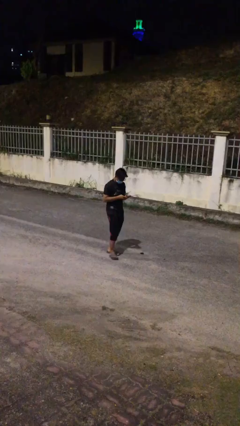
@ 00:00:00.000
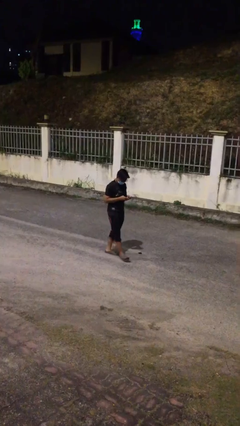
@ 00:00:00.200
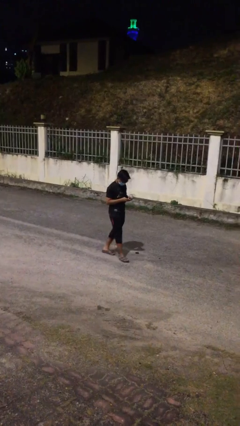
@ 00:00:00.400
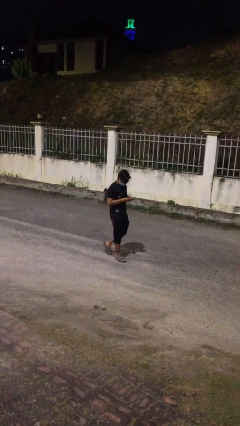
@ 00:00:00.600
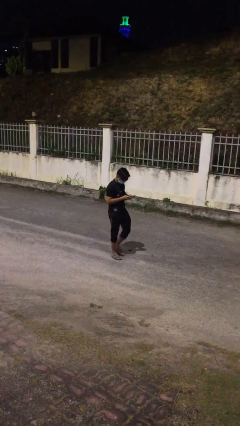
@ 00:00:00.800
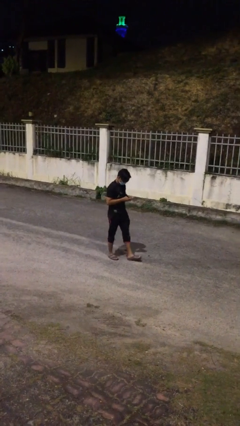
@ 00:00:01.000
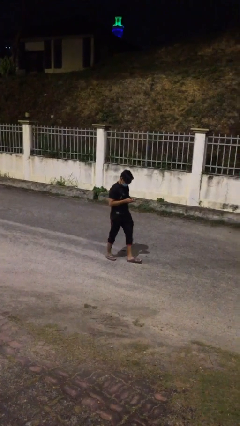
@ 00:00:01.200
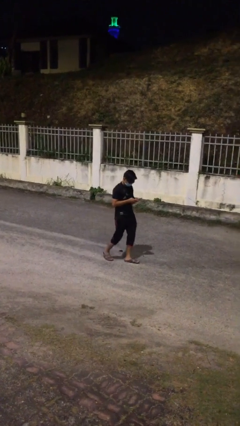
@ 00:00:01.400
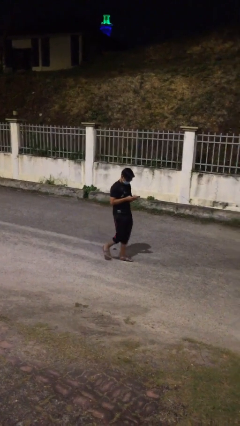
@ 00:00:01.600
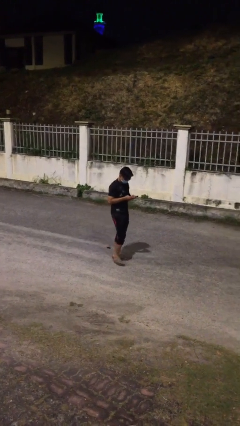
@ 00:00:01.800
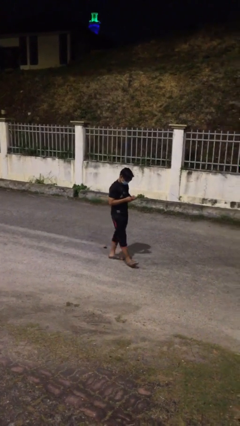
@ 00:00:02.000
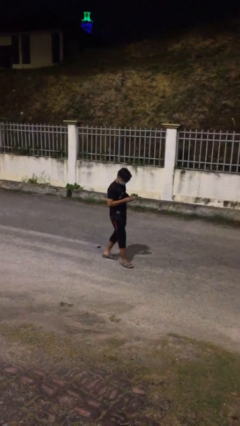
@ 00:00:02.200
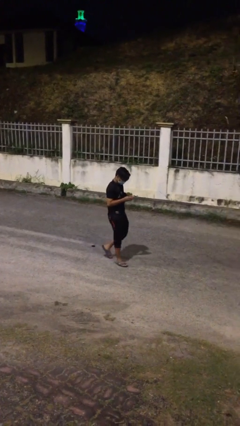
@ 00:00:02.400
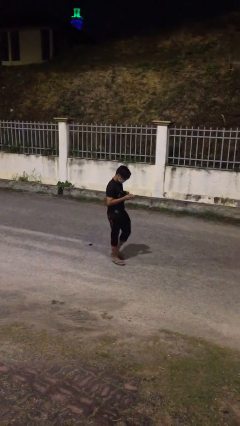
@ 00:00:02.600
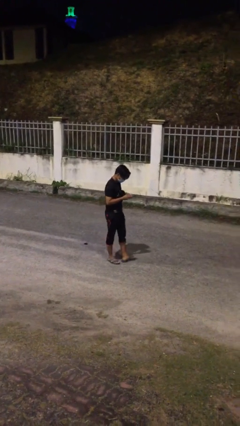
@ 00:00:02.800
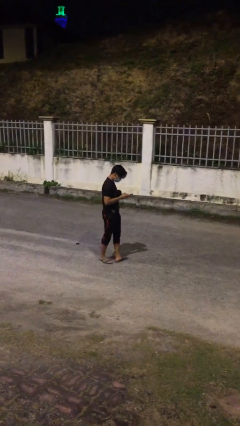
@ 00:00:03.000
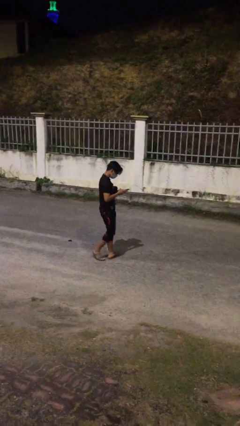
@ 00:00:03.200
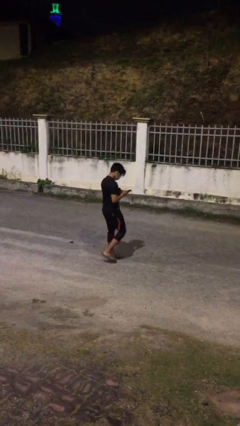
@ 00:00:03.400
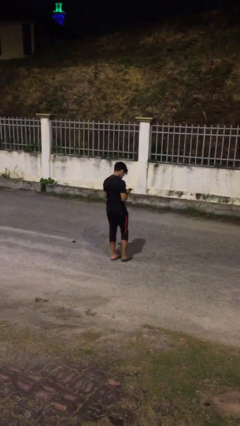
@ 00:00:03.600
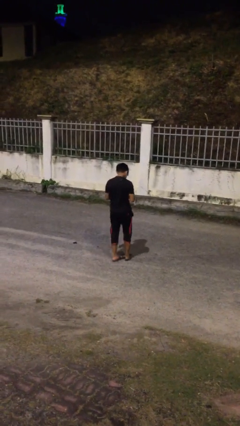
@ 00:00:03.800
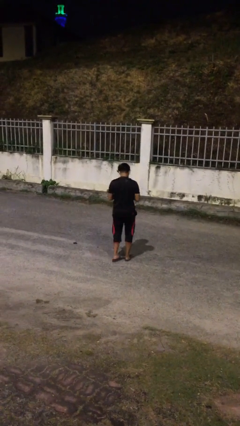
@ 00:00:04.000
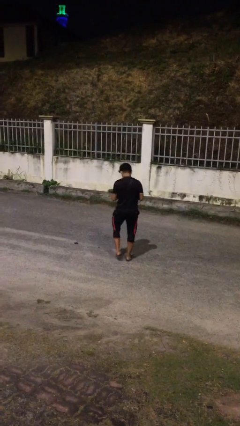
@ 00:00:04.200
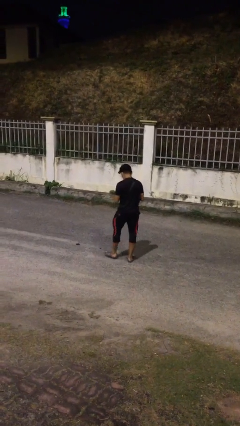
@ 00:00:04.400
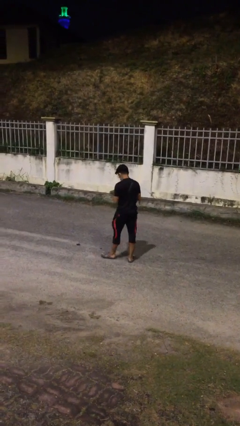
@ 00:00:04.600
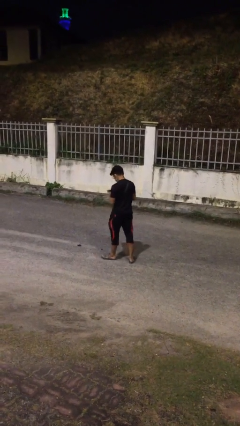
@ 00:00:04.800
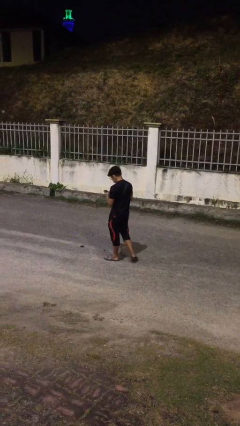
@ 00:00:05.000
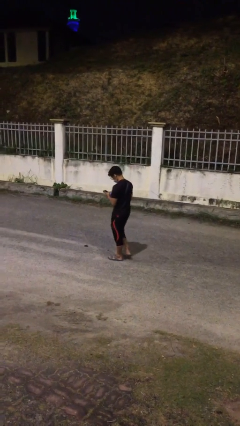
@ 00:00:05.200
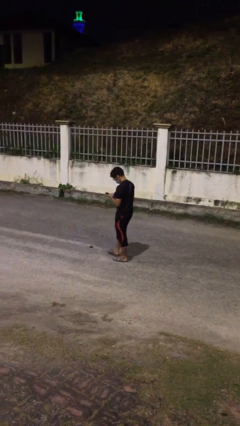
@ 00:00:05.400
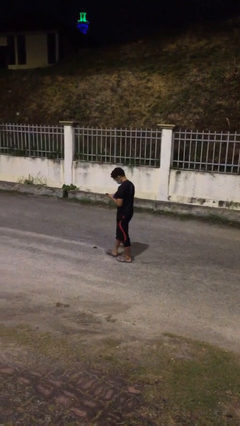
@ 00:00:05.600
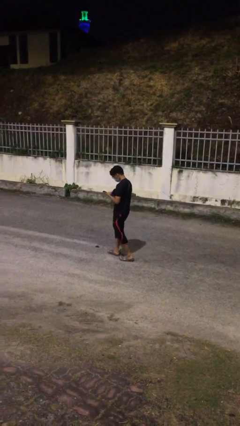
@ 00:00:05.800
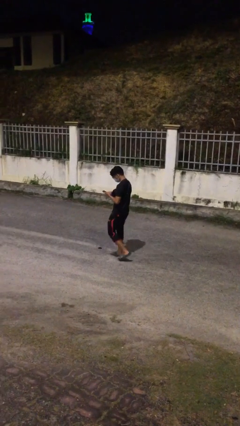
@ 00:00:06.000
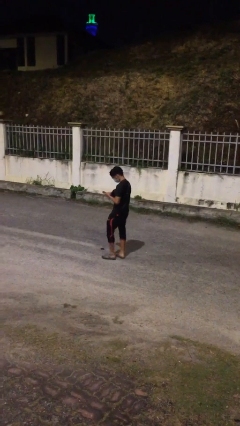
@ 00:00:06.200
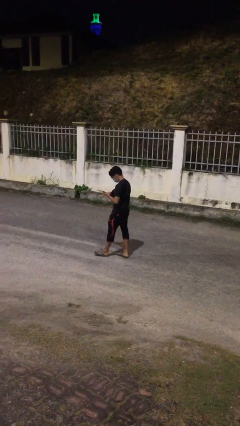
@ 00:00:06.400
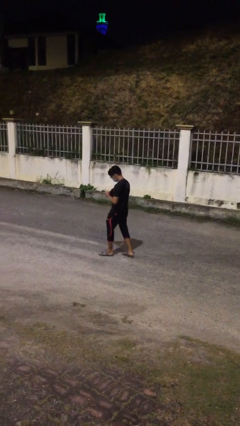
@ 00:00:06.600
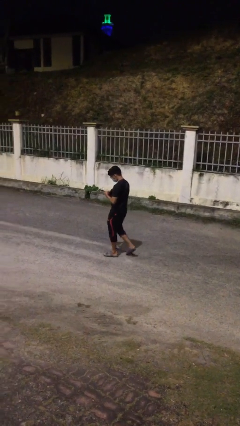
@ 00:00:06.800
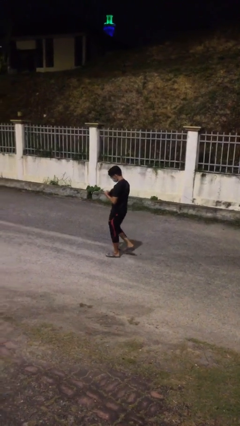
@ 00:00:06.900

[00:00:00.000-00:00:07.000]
person texts on phone

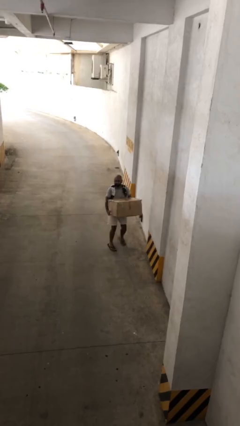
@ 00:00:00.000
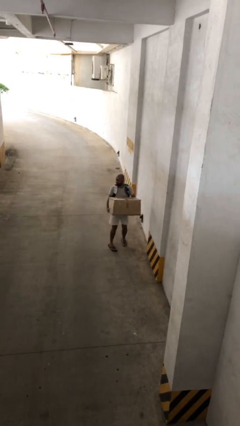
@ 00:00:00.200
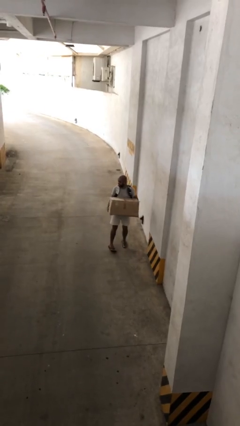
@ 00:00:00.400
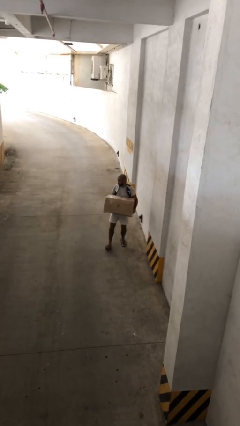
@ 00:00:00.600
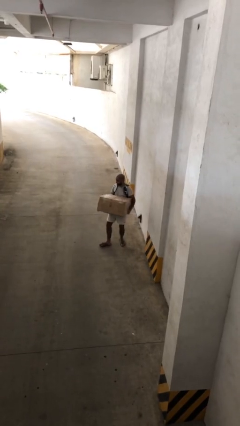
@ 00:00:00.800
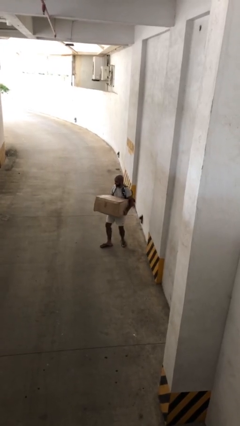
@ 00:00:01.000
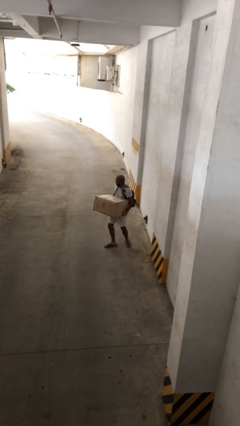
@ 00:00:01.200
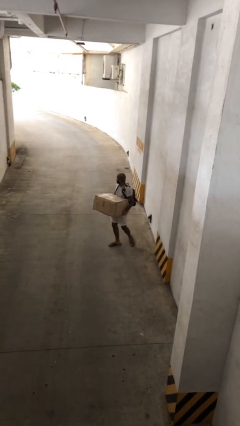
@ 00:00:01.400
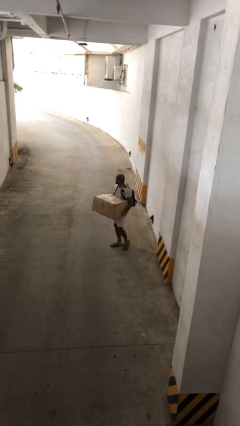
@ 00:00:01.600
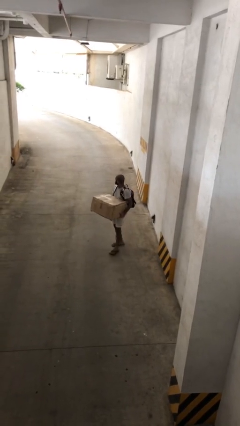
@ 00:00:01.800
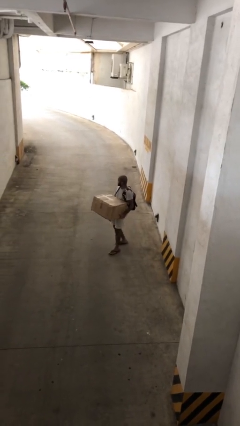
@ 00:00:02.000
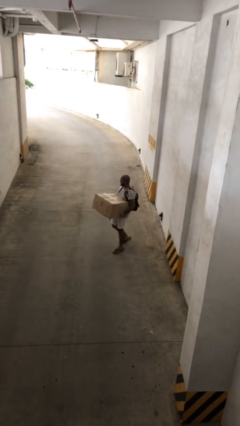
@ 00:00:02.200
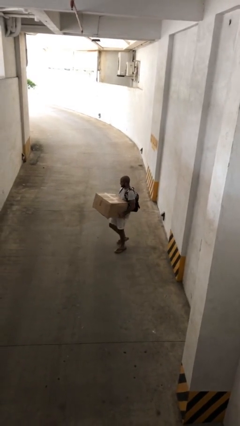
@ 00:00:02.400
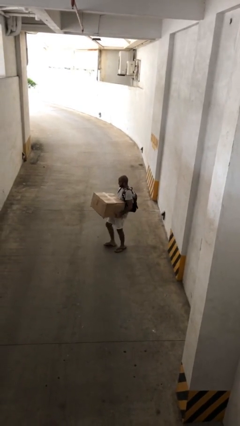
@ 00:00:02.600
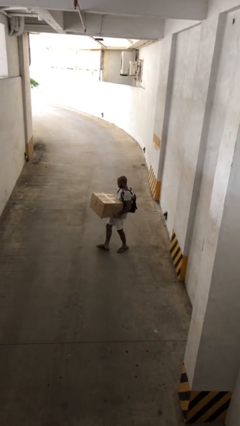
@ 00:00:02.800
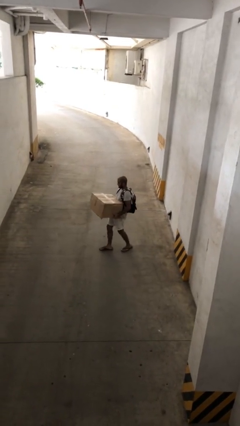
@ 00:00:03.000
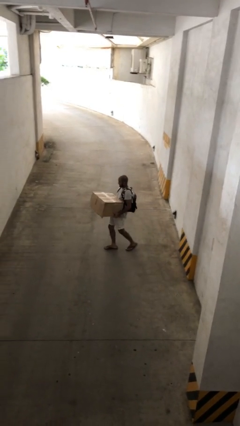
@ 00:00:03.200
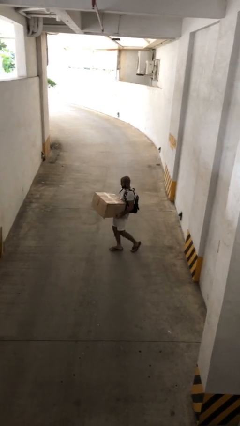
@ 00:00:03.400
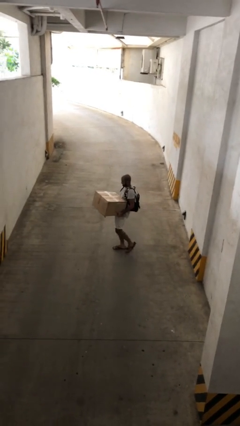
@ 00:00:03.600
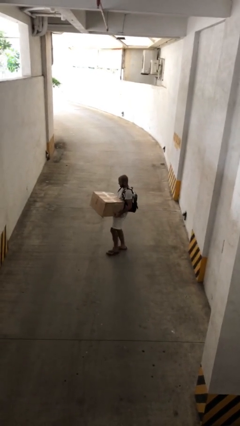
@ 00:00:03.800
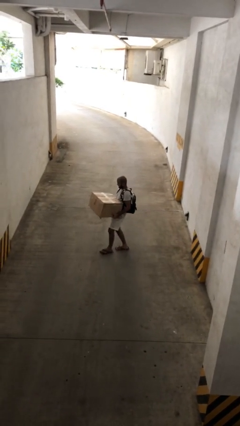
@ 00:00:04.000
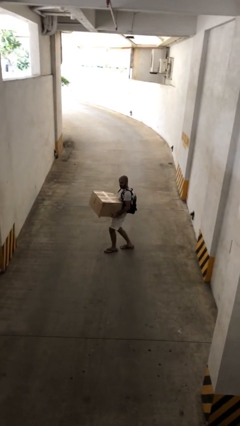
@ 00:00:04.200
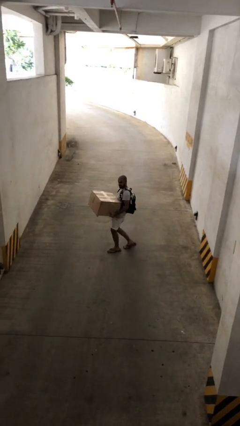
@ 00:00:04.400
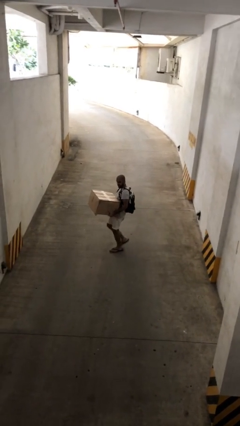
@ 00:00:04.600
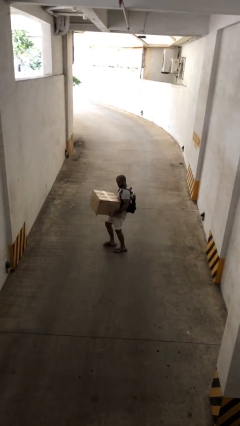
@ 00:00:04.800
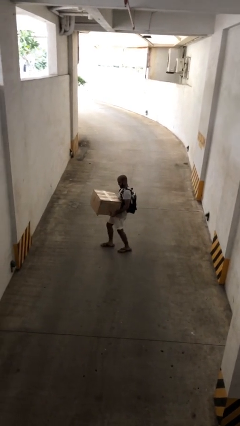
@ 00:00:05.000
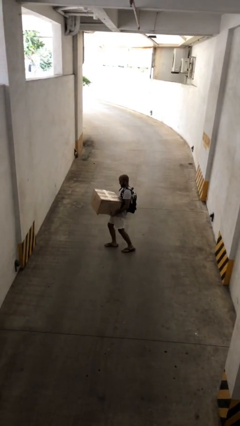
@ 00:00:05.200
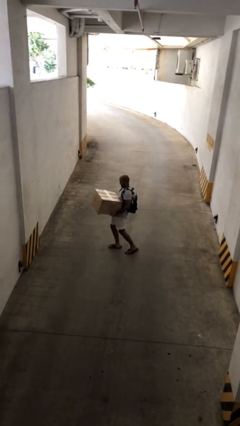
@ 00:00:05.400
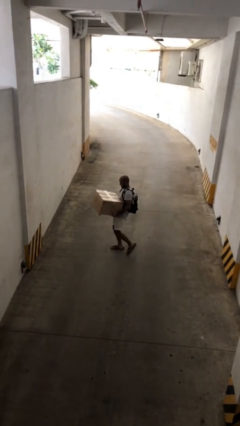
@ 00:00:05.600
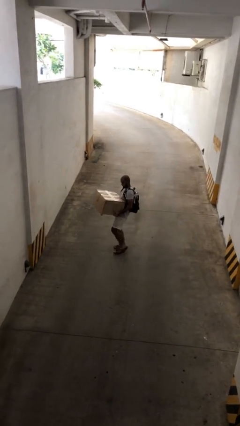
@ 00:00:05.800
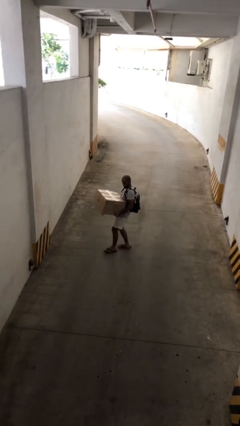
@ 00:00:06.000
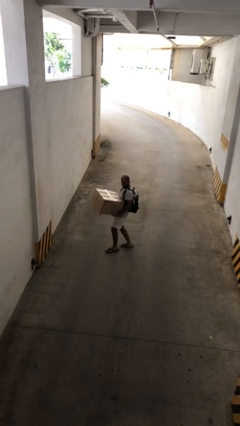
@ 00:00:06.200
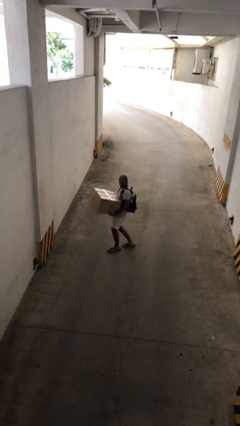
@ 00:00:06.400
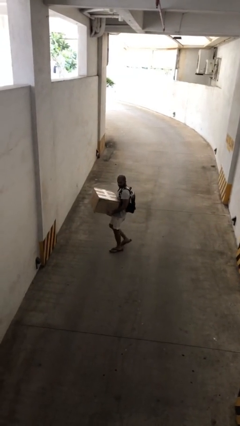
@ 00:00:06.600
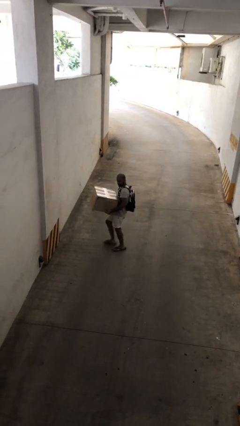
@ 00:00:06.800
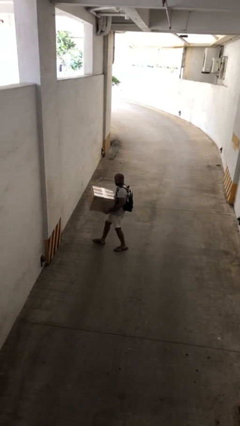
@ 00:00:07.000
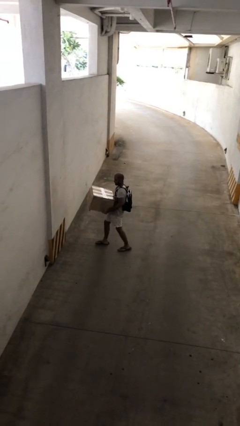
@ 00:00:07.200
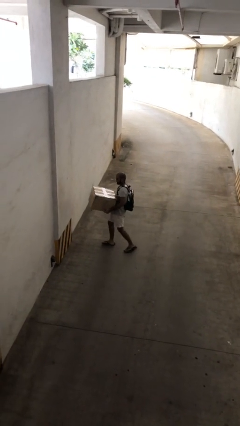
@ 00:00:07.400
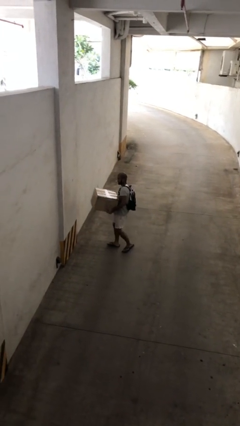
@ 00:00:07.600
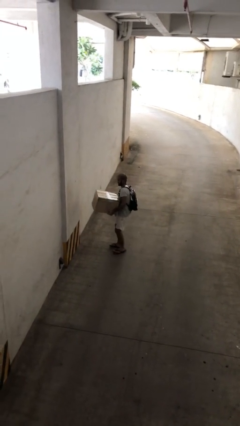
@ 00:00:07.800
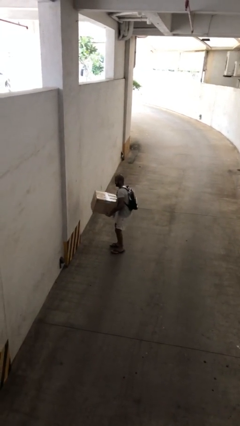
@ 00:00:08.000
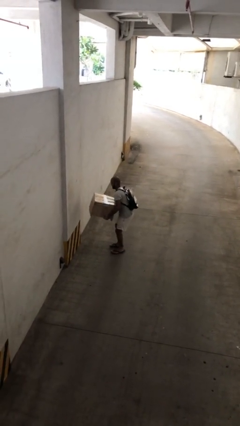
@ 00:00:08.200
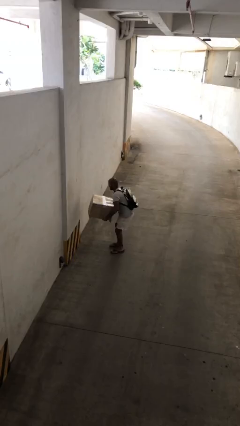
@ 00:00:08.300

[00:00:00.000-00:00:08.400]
person carries heavy object

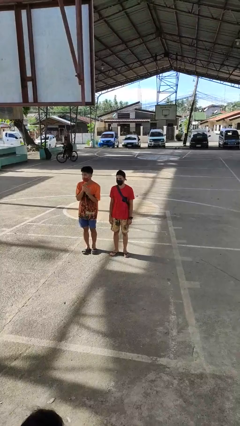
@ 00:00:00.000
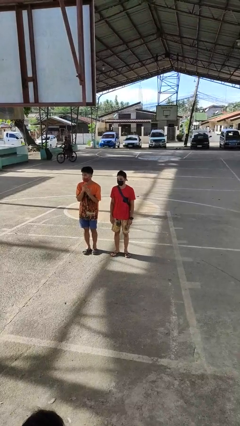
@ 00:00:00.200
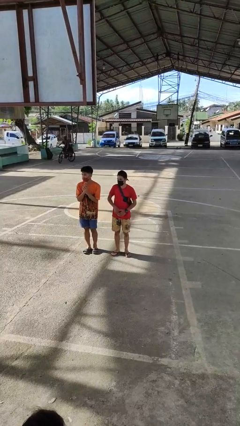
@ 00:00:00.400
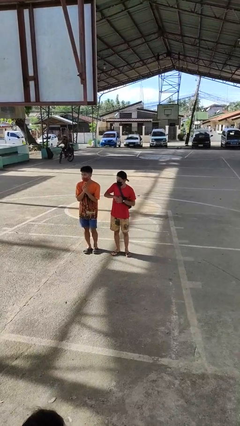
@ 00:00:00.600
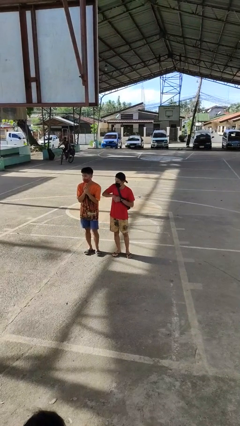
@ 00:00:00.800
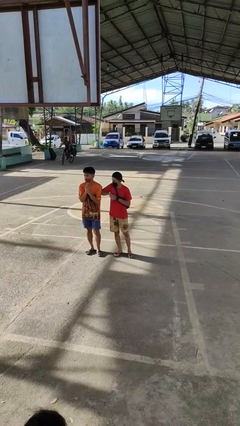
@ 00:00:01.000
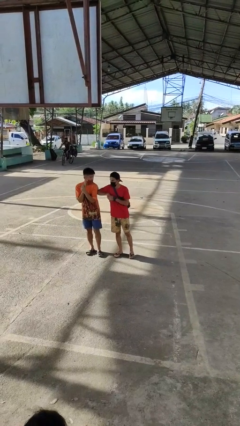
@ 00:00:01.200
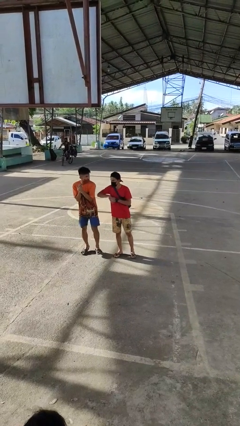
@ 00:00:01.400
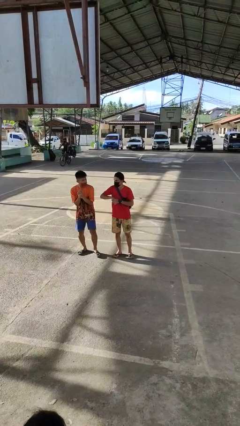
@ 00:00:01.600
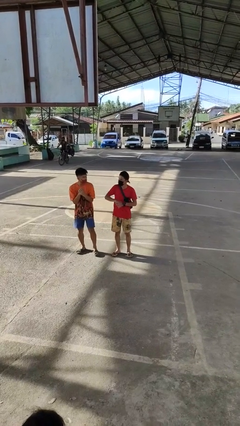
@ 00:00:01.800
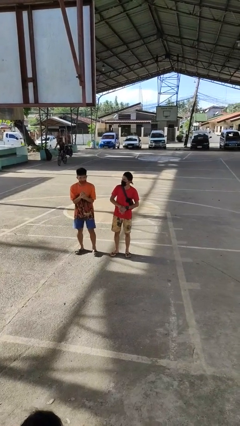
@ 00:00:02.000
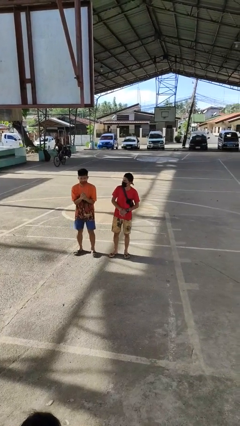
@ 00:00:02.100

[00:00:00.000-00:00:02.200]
person nudges person with elbow

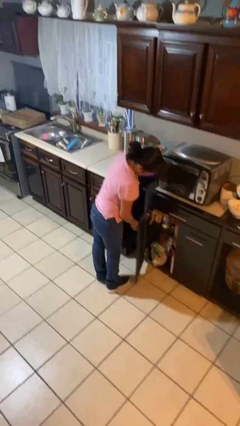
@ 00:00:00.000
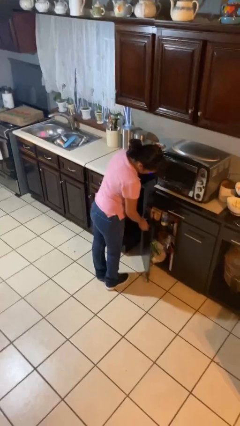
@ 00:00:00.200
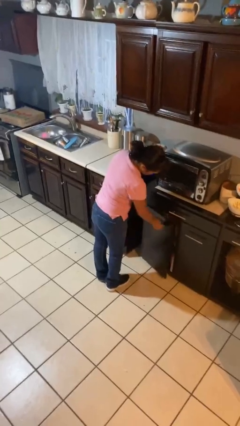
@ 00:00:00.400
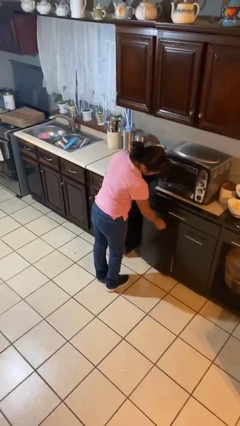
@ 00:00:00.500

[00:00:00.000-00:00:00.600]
person closes cabinet
